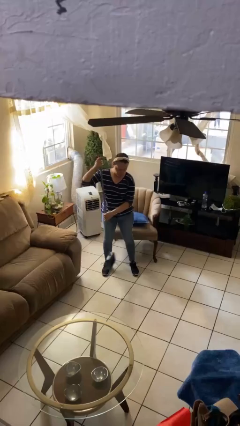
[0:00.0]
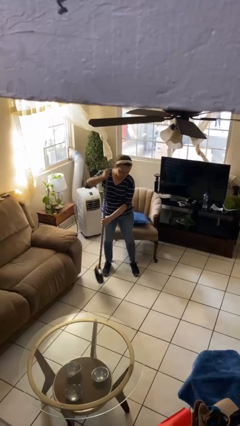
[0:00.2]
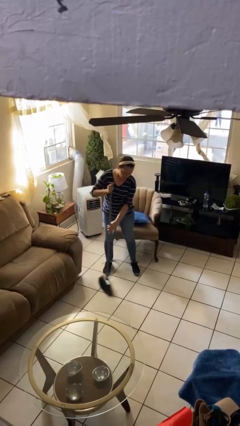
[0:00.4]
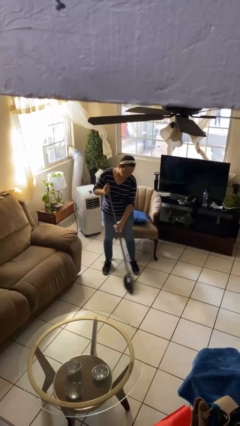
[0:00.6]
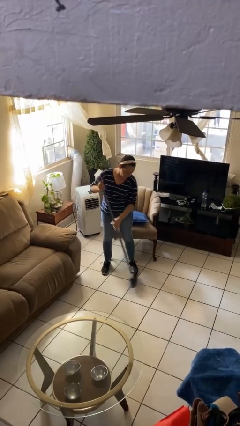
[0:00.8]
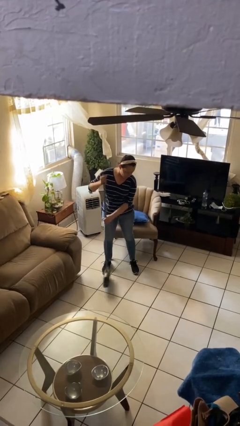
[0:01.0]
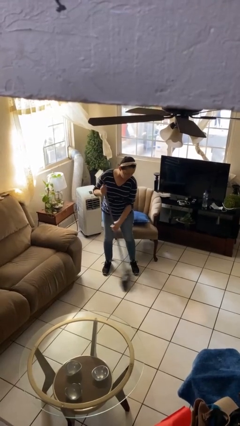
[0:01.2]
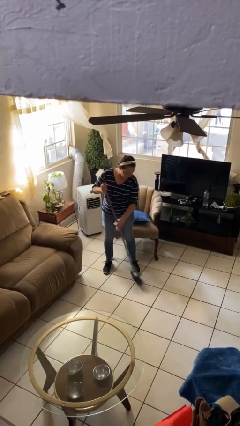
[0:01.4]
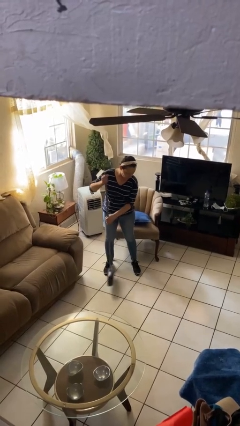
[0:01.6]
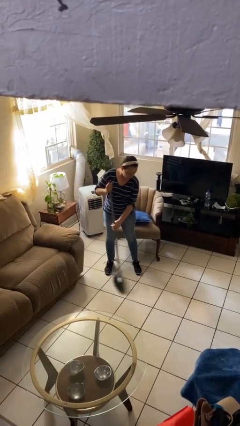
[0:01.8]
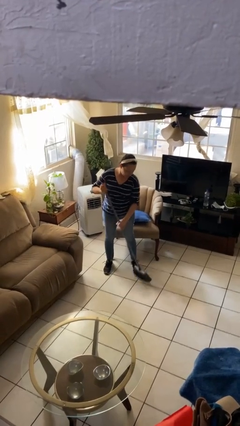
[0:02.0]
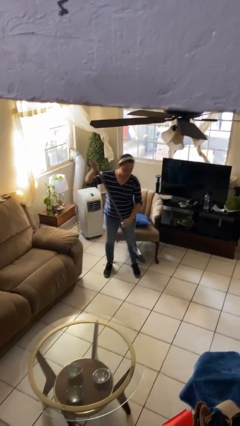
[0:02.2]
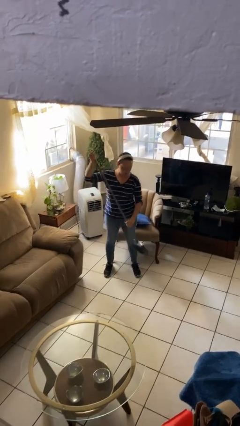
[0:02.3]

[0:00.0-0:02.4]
person sweeps floor

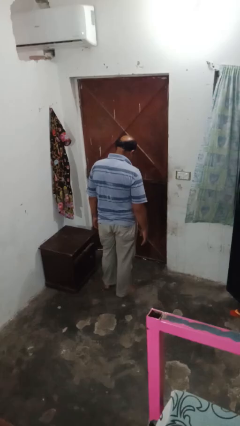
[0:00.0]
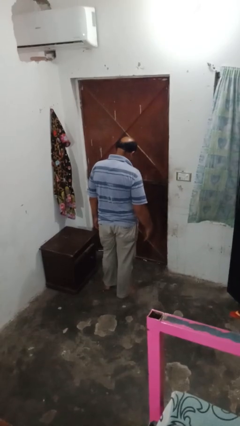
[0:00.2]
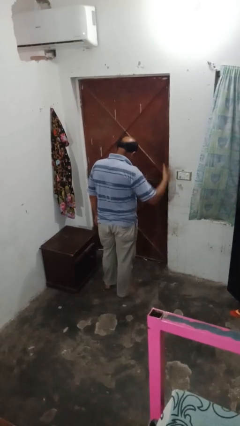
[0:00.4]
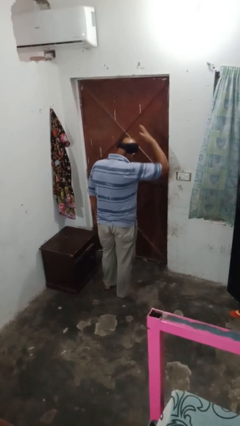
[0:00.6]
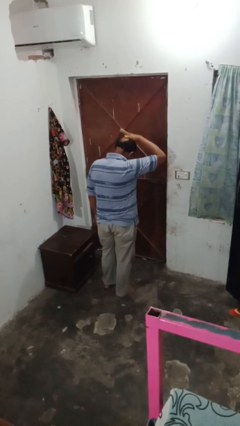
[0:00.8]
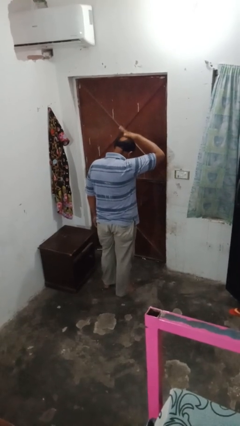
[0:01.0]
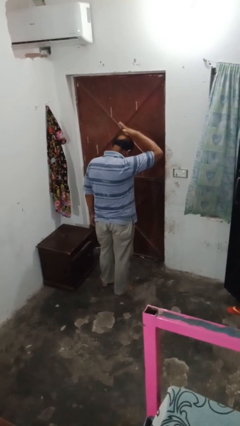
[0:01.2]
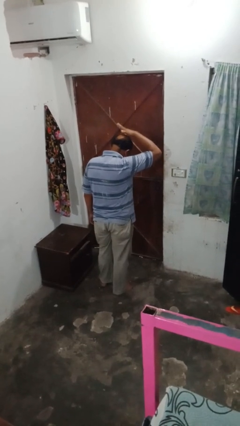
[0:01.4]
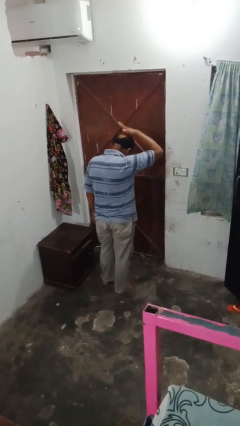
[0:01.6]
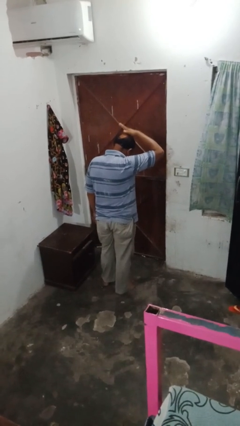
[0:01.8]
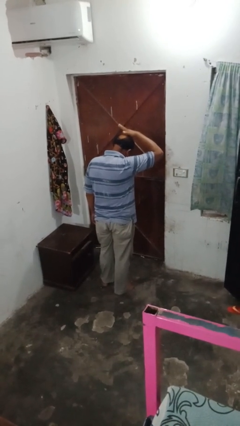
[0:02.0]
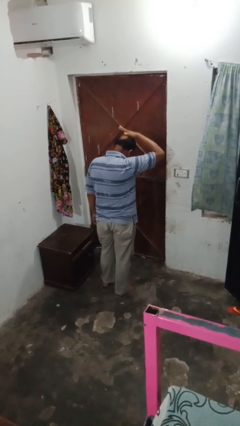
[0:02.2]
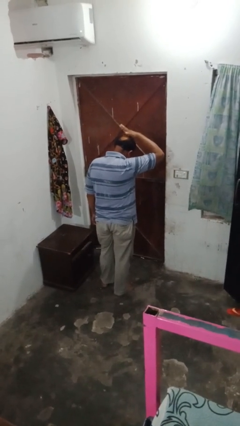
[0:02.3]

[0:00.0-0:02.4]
person pats head

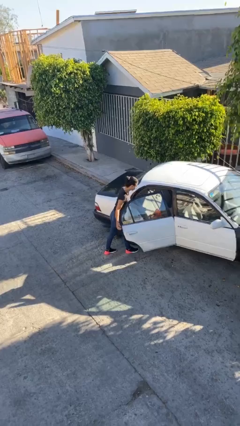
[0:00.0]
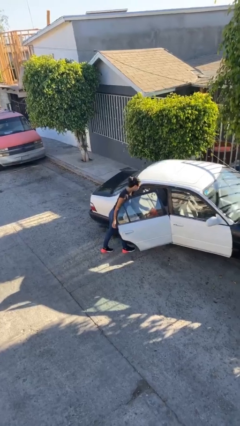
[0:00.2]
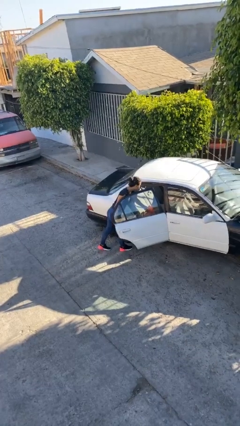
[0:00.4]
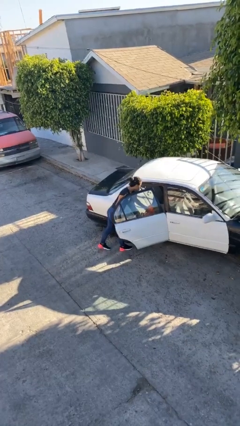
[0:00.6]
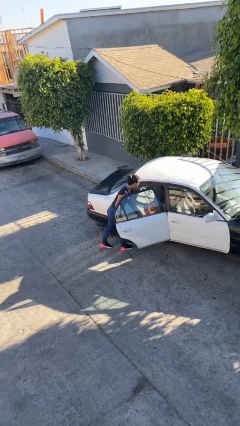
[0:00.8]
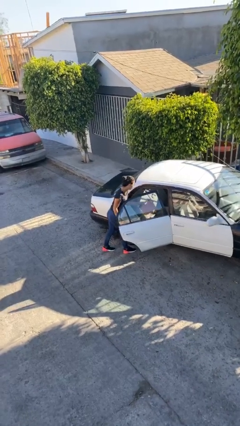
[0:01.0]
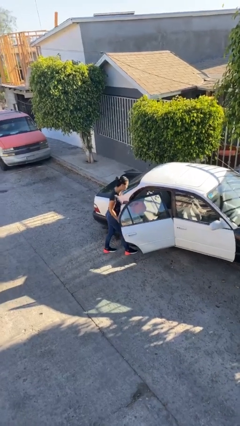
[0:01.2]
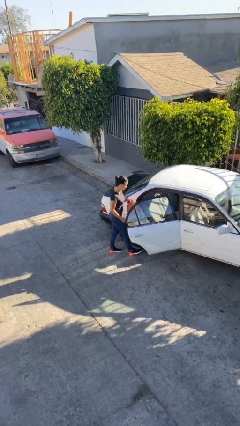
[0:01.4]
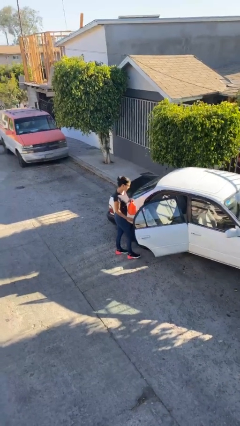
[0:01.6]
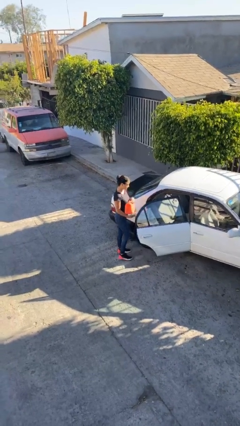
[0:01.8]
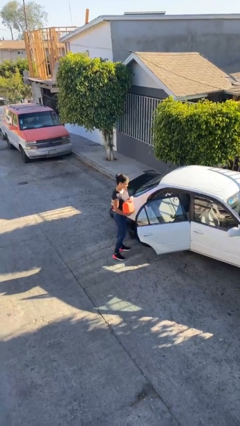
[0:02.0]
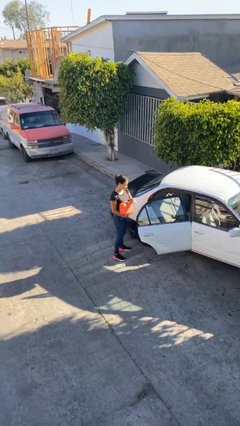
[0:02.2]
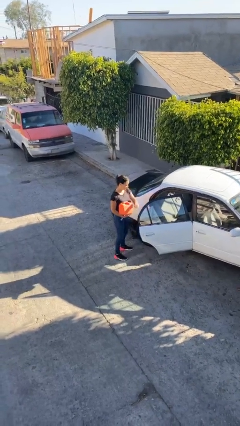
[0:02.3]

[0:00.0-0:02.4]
person unloads car

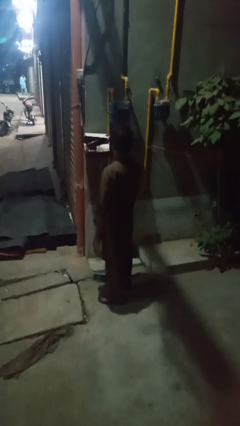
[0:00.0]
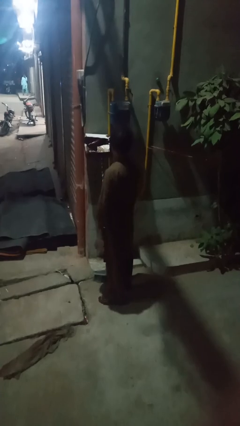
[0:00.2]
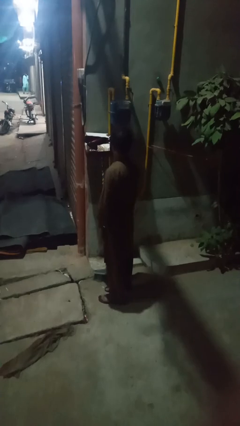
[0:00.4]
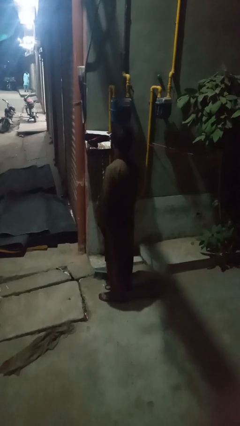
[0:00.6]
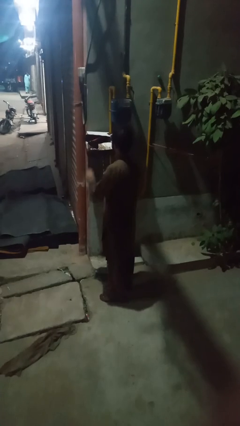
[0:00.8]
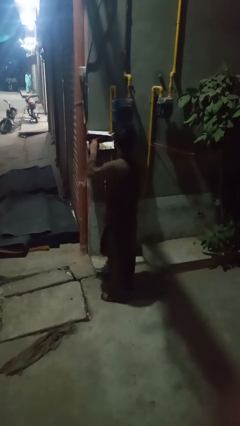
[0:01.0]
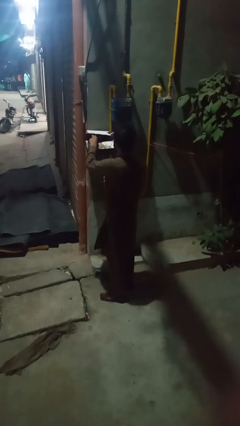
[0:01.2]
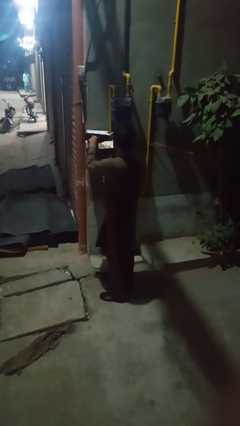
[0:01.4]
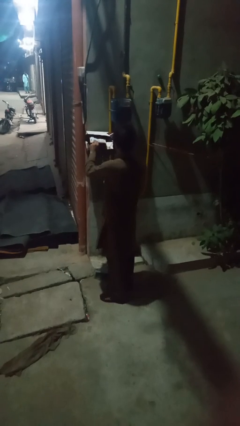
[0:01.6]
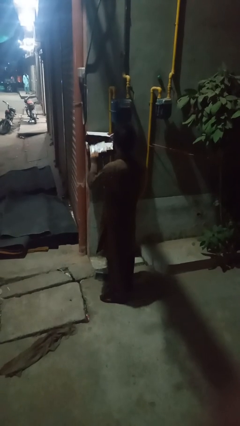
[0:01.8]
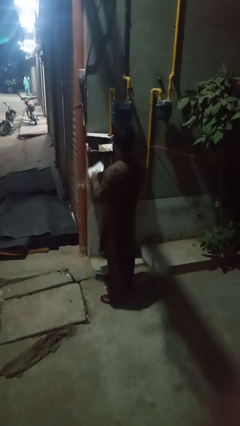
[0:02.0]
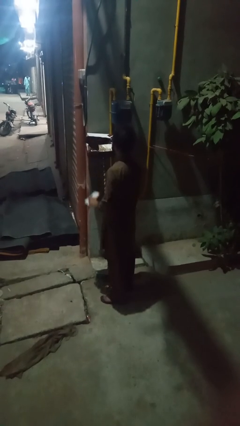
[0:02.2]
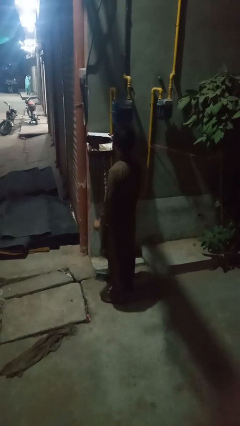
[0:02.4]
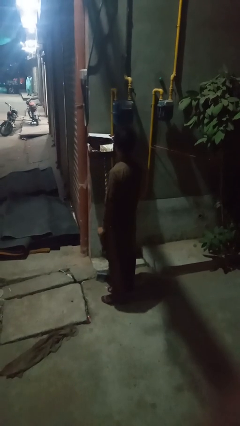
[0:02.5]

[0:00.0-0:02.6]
person puts letters in mailbox

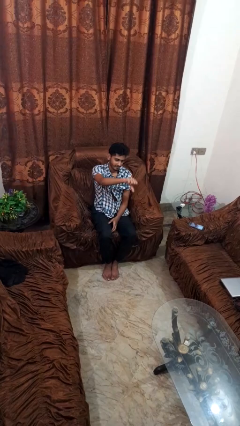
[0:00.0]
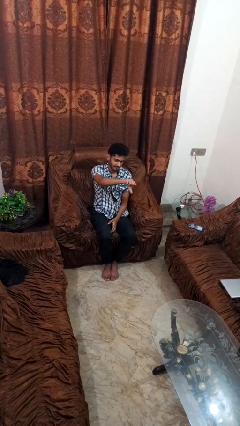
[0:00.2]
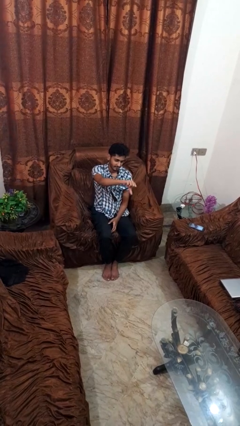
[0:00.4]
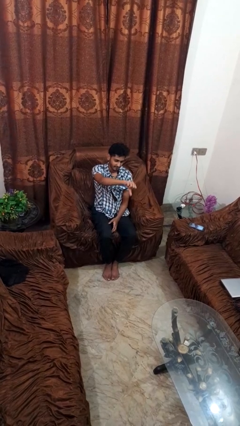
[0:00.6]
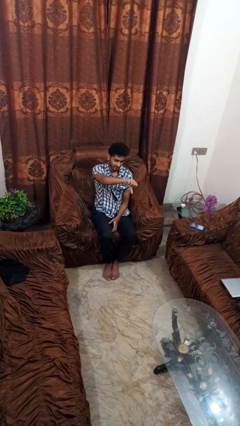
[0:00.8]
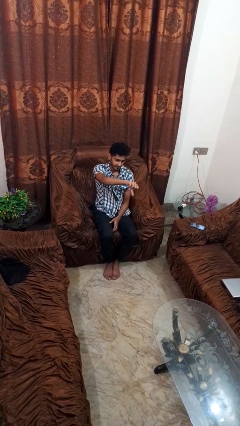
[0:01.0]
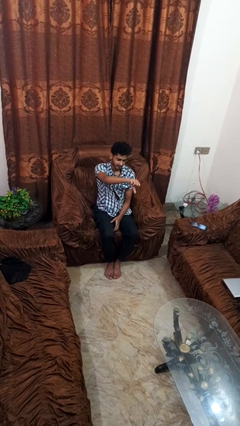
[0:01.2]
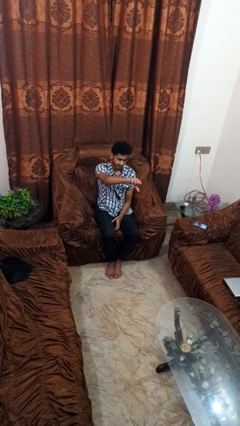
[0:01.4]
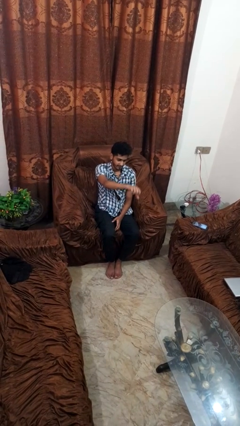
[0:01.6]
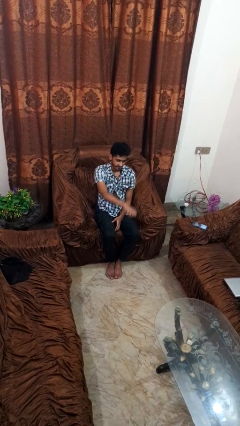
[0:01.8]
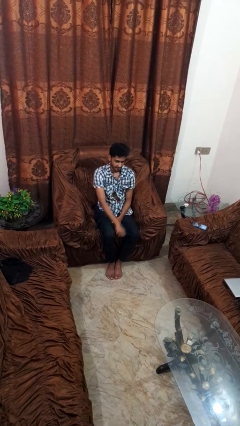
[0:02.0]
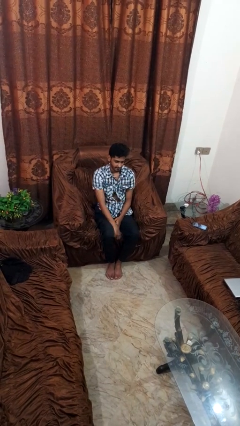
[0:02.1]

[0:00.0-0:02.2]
person gestures thumbs down

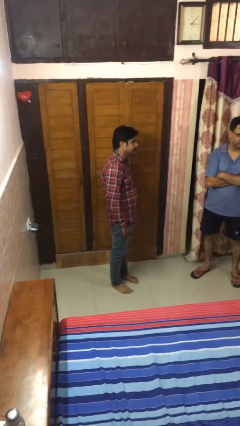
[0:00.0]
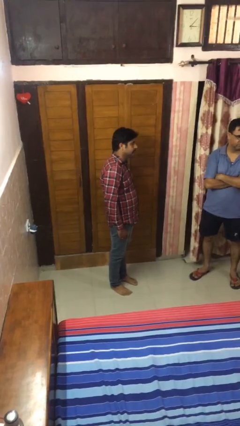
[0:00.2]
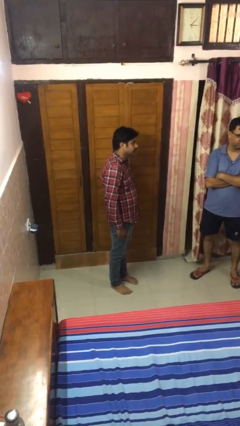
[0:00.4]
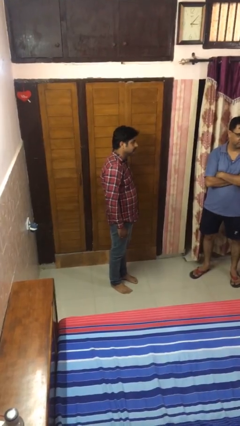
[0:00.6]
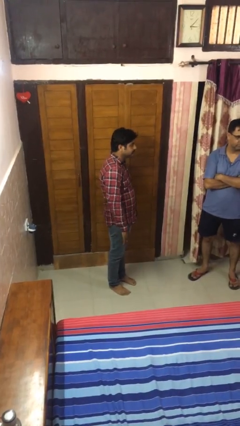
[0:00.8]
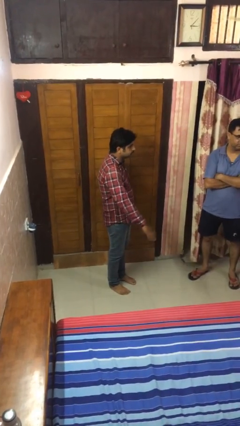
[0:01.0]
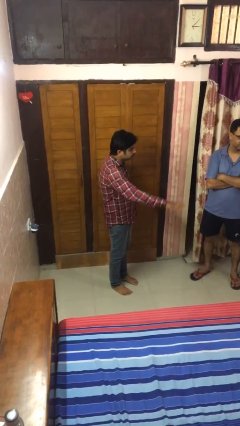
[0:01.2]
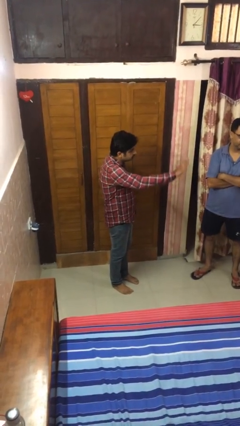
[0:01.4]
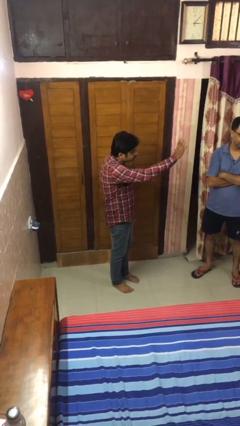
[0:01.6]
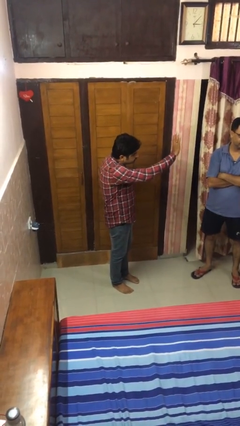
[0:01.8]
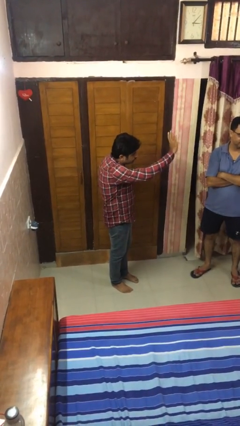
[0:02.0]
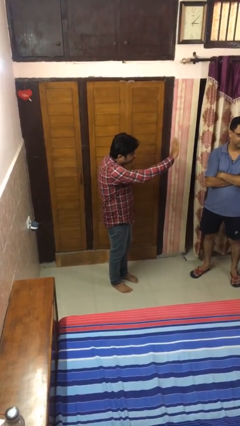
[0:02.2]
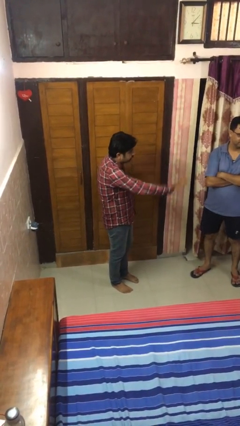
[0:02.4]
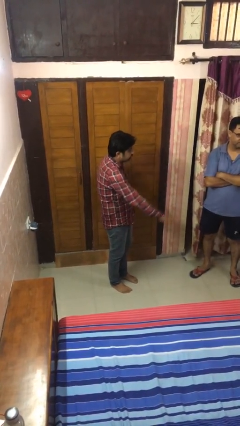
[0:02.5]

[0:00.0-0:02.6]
person waves at person

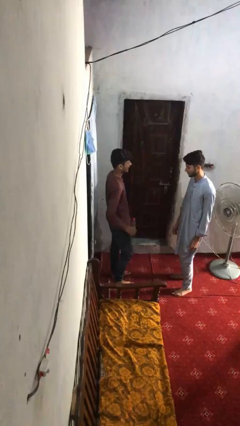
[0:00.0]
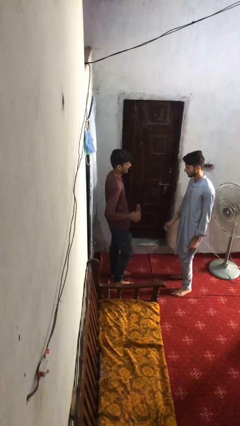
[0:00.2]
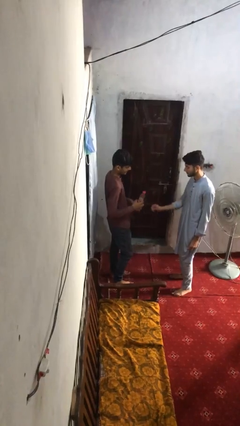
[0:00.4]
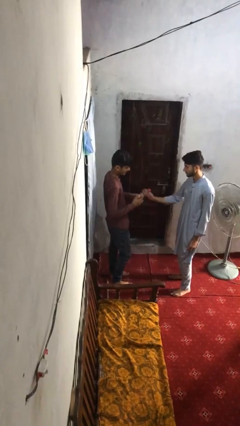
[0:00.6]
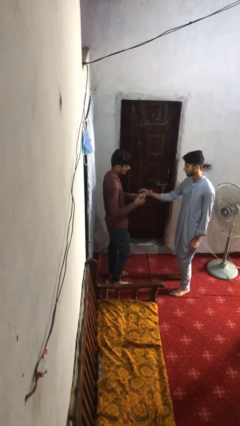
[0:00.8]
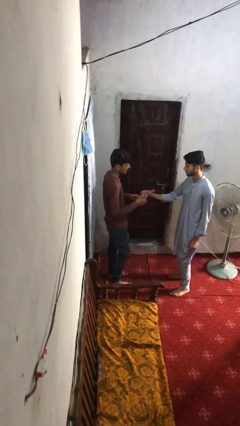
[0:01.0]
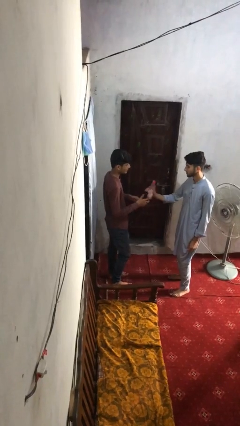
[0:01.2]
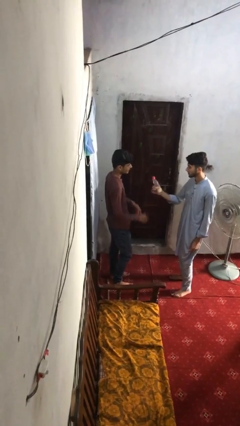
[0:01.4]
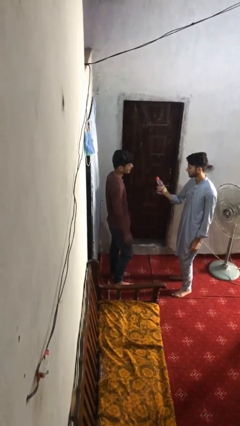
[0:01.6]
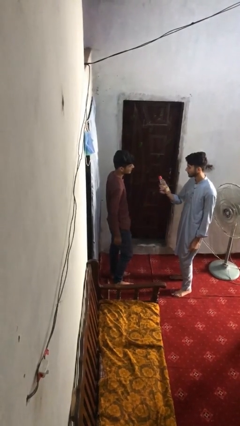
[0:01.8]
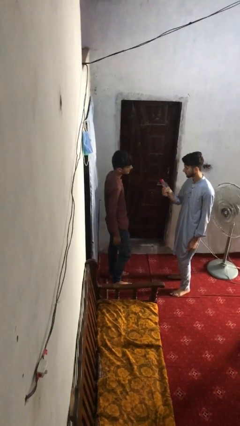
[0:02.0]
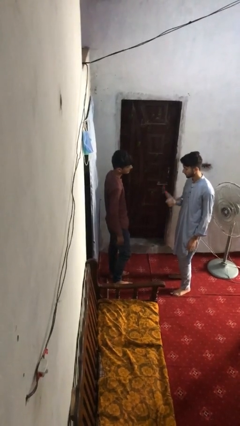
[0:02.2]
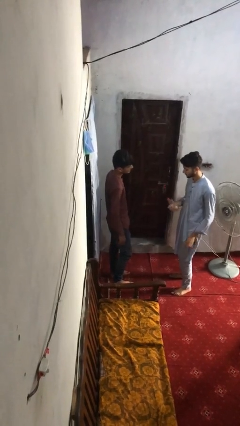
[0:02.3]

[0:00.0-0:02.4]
person transfers object to person

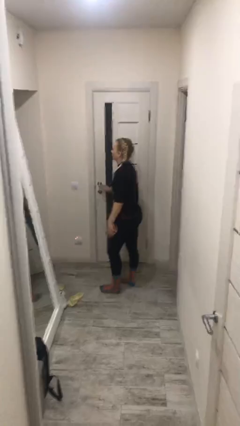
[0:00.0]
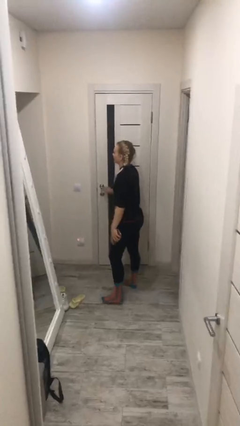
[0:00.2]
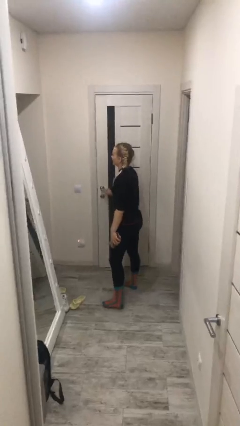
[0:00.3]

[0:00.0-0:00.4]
person opens facility door
